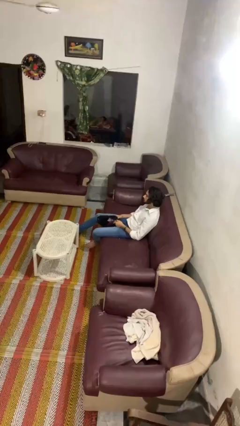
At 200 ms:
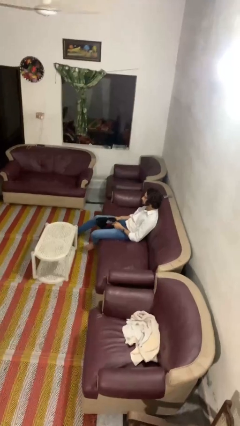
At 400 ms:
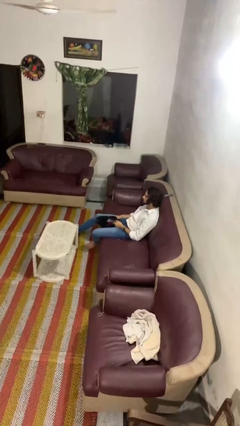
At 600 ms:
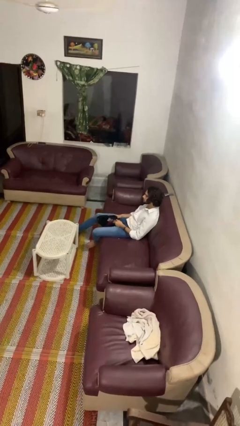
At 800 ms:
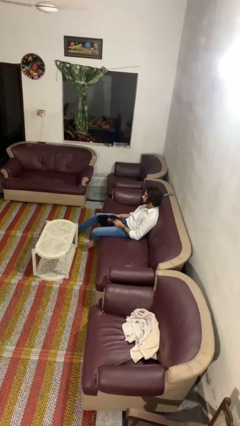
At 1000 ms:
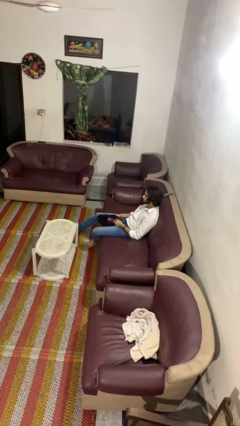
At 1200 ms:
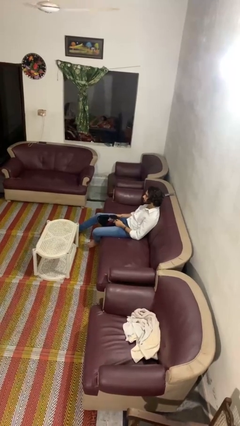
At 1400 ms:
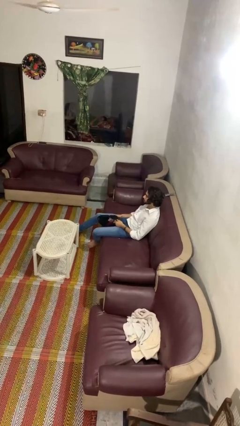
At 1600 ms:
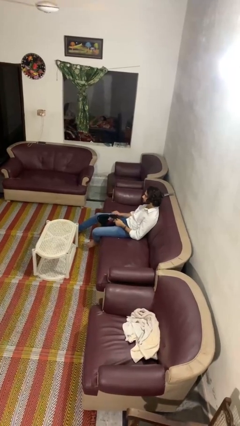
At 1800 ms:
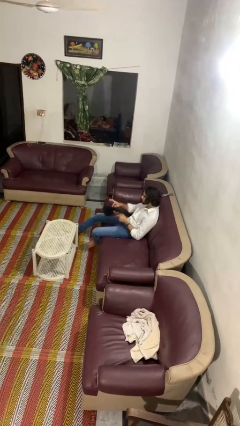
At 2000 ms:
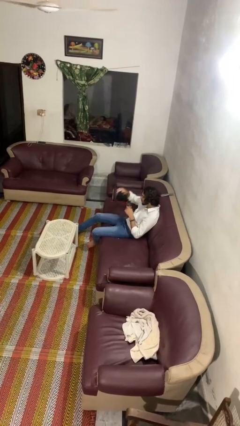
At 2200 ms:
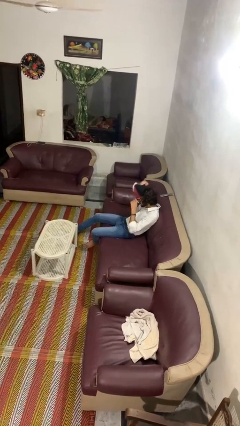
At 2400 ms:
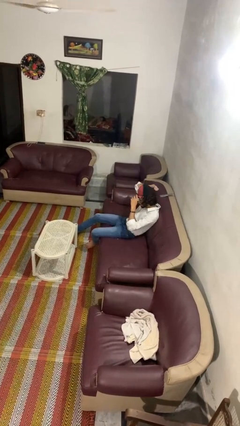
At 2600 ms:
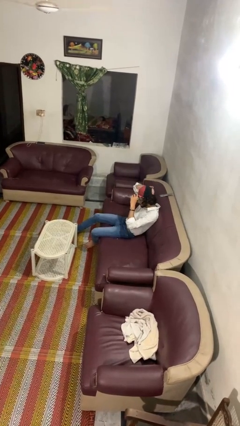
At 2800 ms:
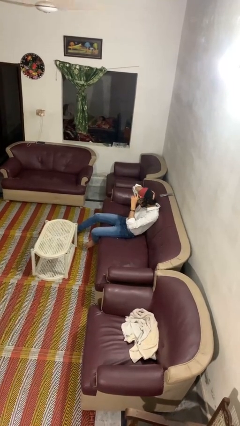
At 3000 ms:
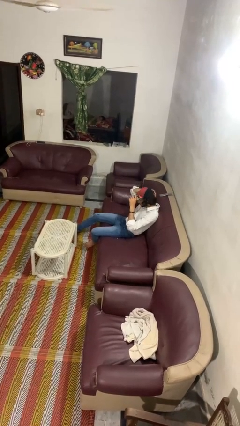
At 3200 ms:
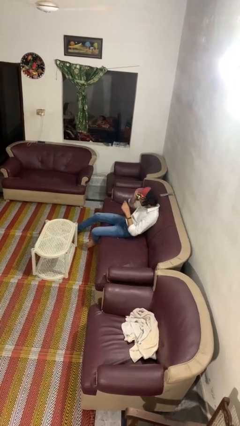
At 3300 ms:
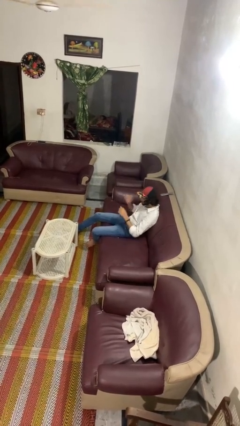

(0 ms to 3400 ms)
person puts on hat

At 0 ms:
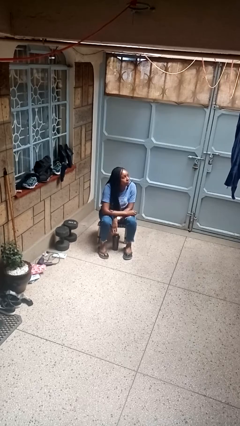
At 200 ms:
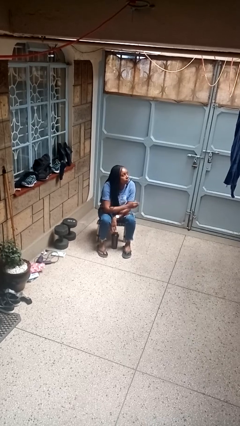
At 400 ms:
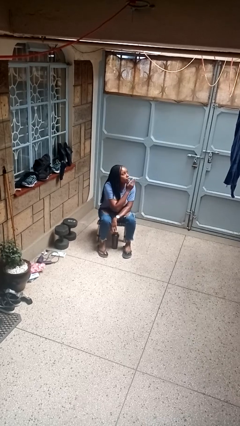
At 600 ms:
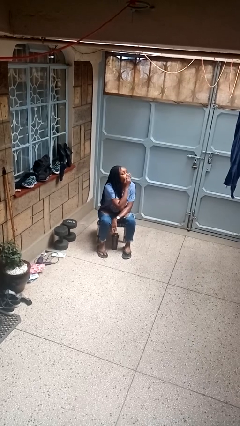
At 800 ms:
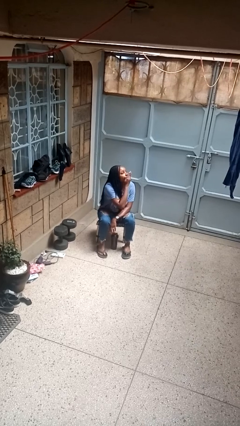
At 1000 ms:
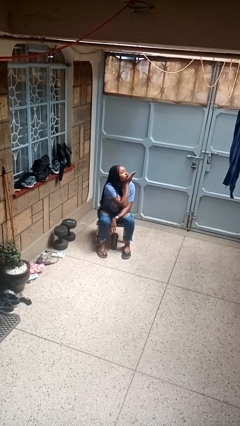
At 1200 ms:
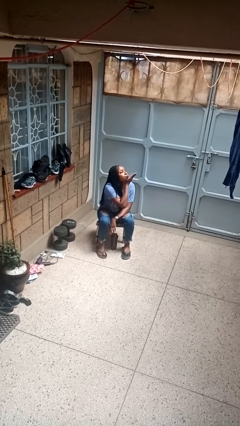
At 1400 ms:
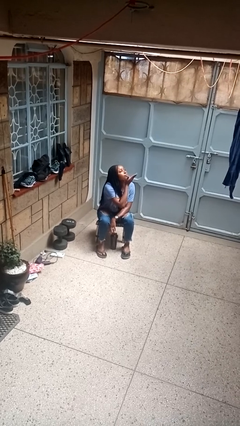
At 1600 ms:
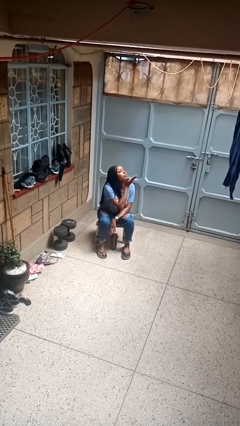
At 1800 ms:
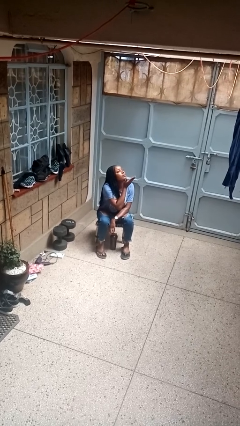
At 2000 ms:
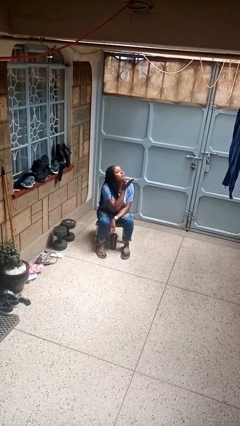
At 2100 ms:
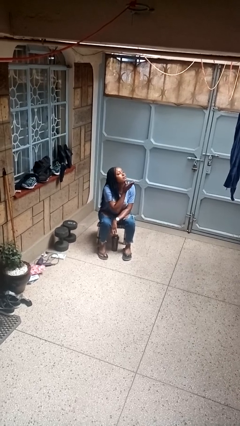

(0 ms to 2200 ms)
person gestures blow kiss

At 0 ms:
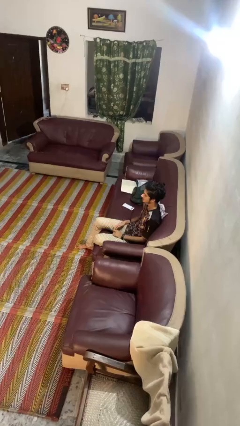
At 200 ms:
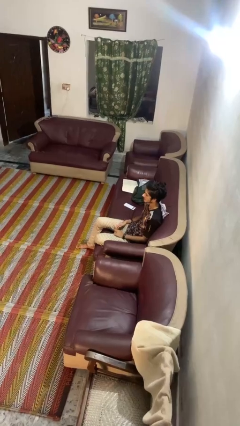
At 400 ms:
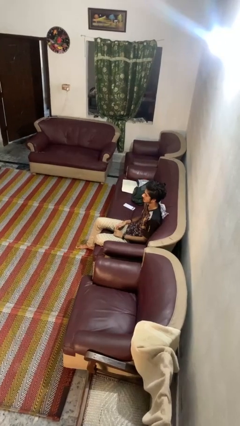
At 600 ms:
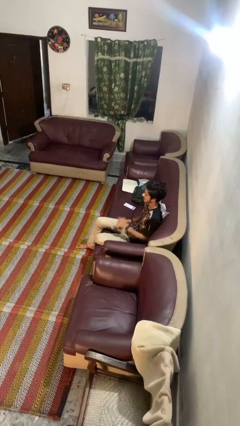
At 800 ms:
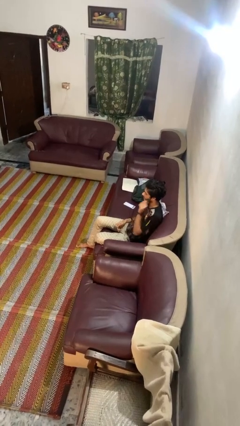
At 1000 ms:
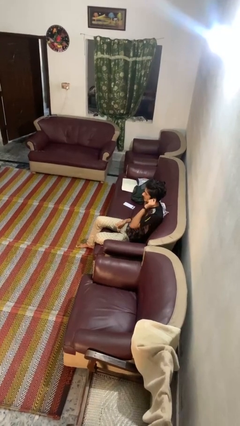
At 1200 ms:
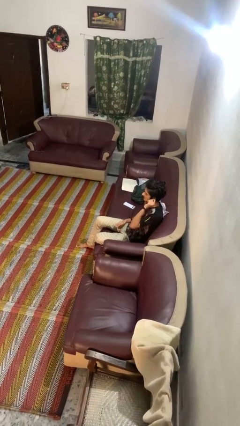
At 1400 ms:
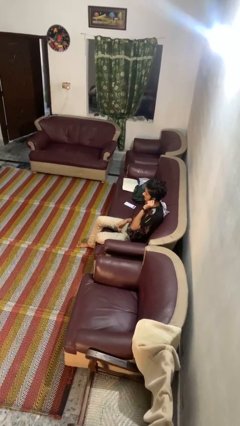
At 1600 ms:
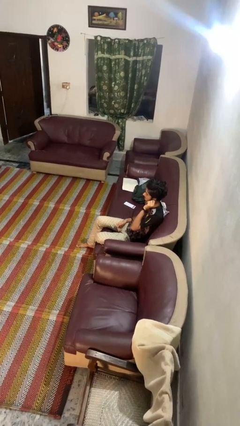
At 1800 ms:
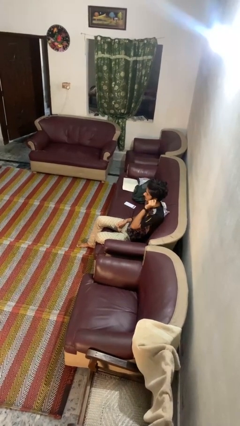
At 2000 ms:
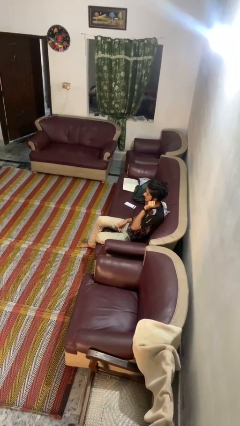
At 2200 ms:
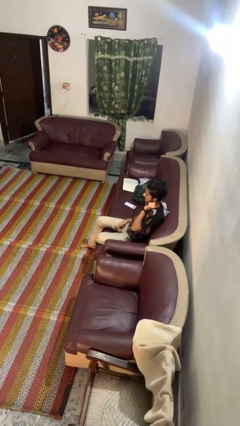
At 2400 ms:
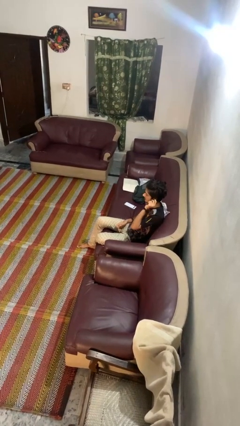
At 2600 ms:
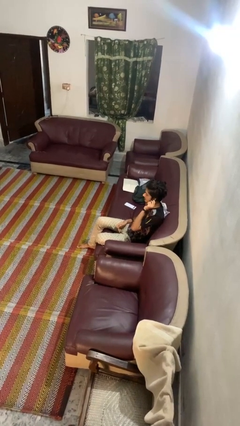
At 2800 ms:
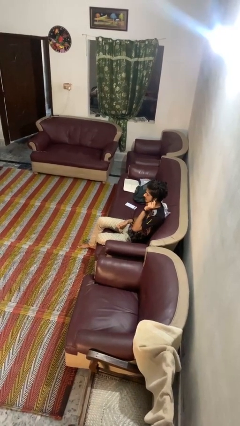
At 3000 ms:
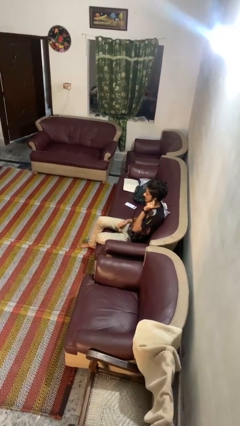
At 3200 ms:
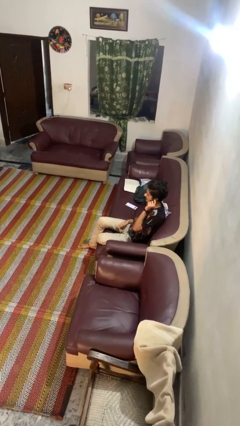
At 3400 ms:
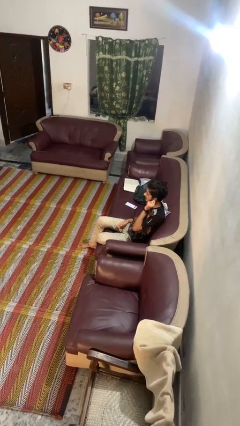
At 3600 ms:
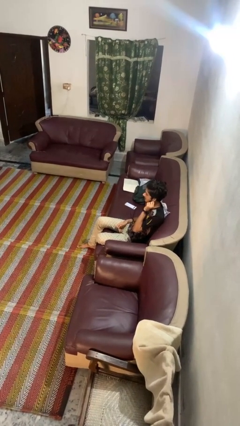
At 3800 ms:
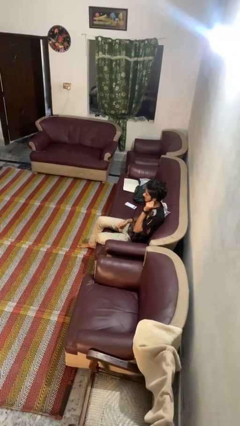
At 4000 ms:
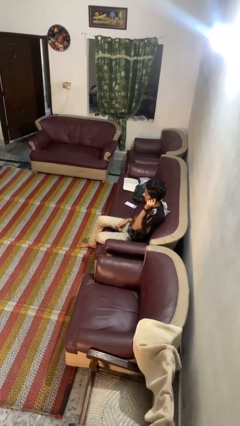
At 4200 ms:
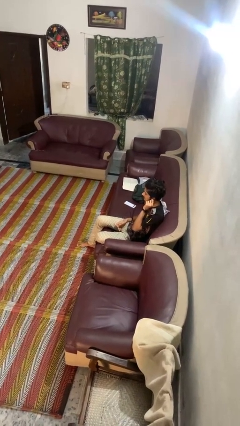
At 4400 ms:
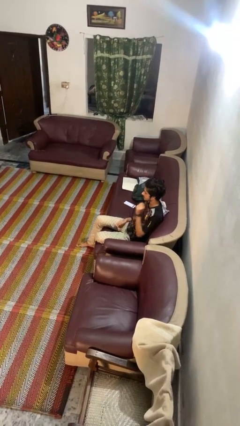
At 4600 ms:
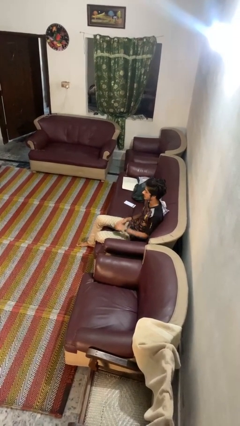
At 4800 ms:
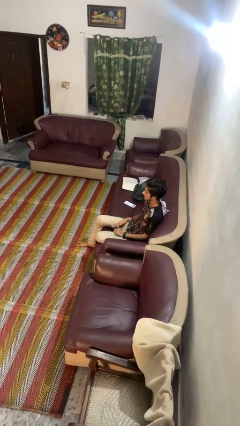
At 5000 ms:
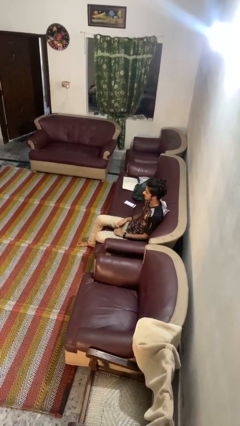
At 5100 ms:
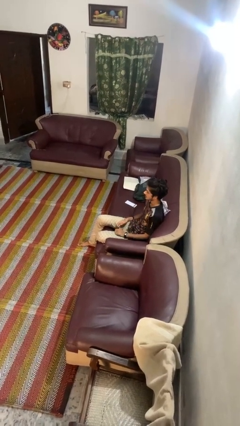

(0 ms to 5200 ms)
person touches earlobe

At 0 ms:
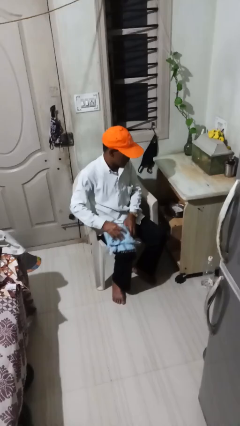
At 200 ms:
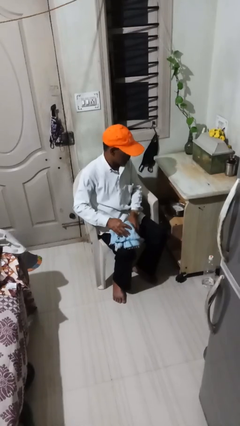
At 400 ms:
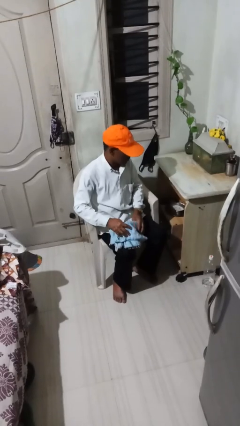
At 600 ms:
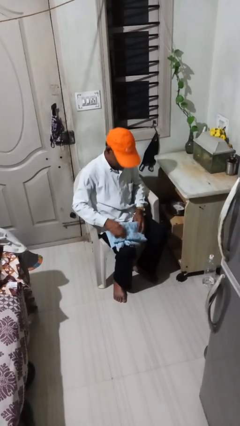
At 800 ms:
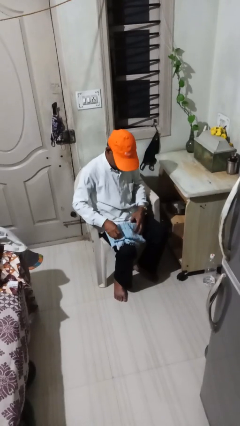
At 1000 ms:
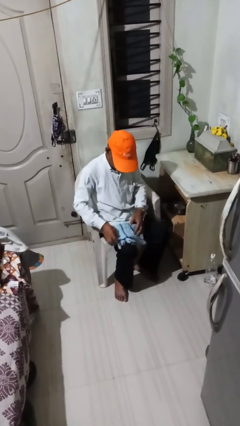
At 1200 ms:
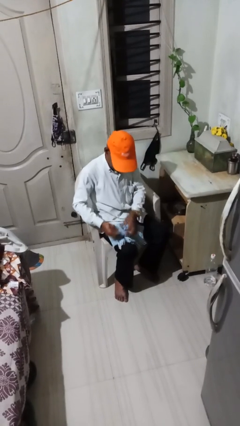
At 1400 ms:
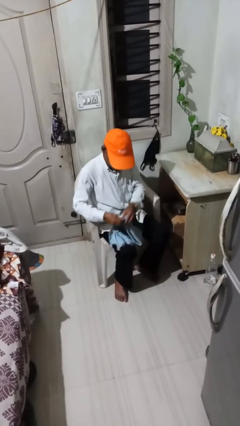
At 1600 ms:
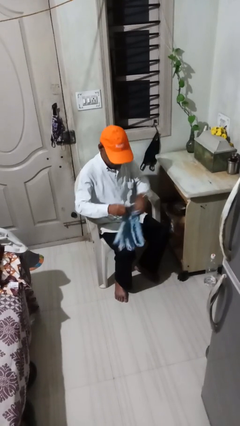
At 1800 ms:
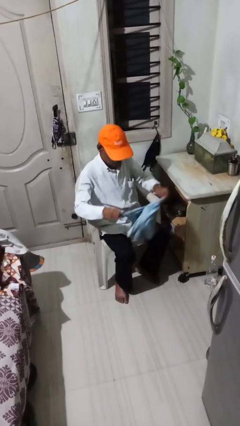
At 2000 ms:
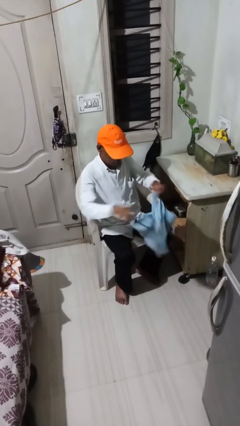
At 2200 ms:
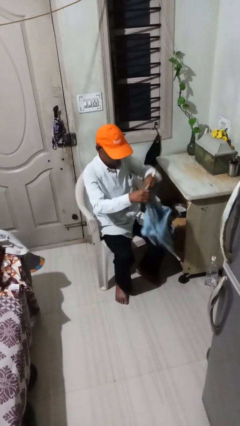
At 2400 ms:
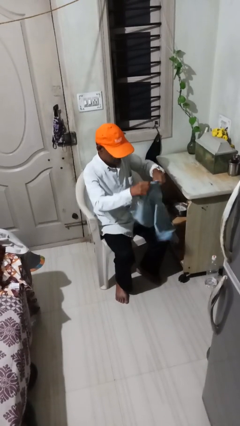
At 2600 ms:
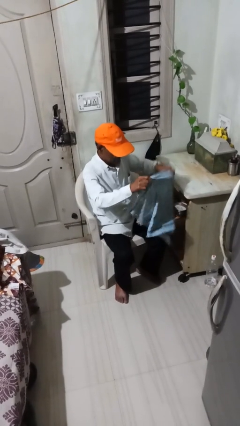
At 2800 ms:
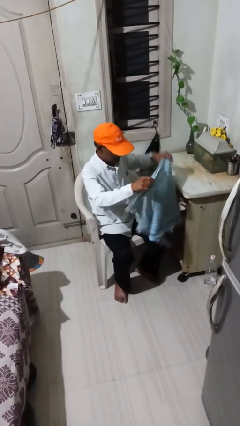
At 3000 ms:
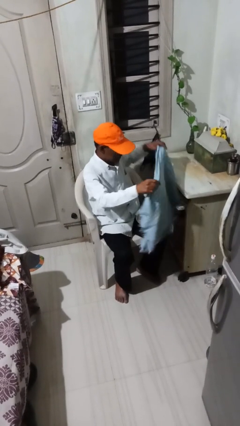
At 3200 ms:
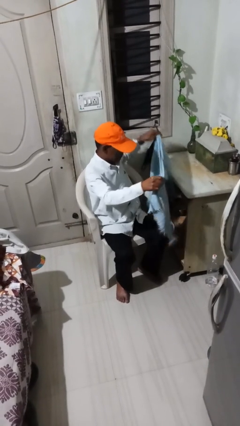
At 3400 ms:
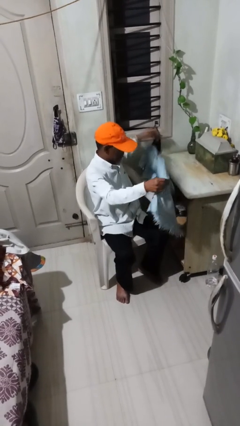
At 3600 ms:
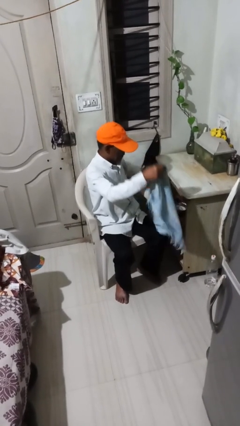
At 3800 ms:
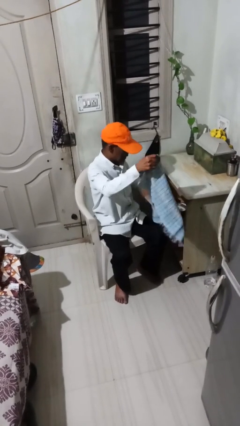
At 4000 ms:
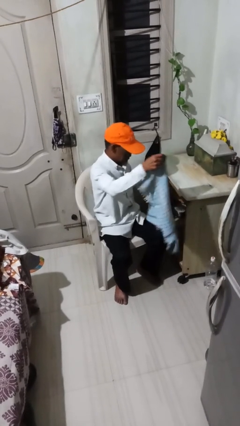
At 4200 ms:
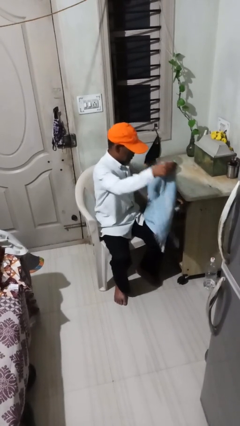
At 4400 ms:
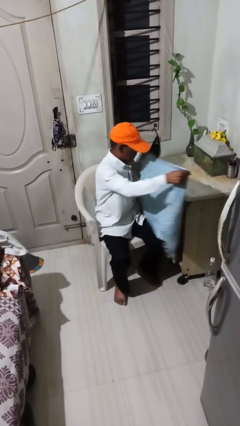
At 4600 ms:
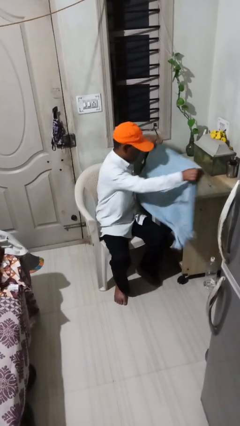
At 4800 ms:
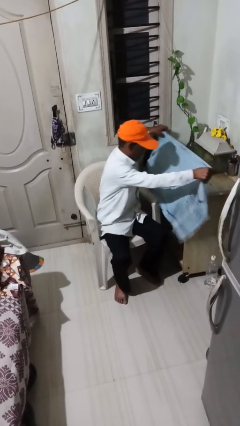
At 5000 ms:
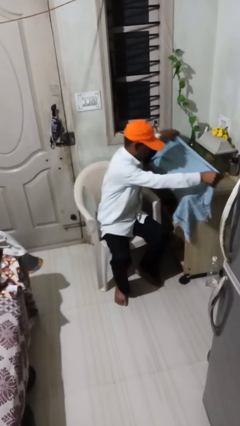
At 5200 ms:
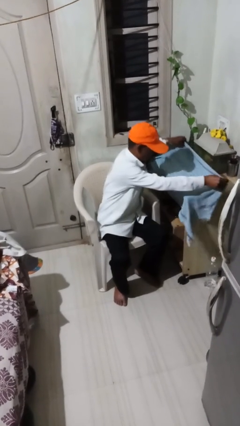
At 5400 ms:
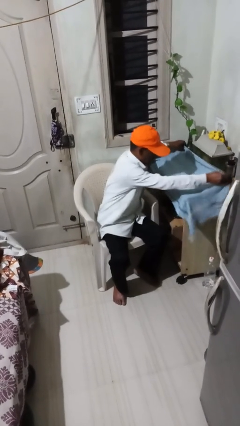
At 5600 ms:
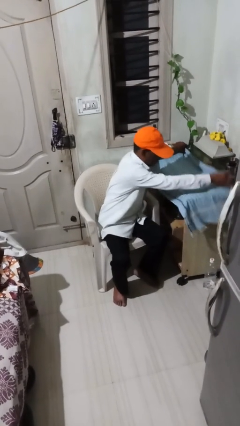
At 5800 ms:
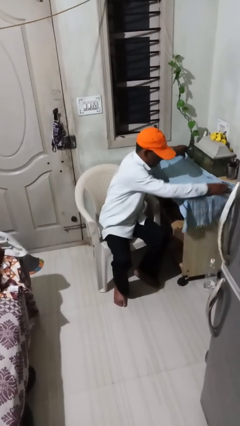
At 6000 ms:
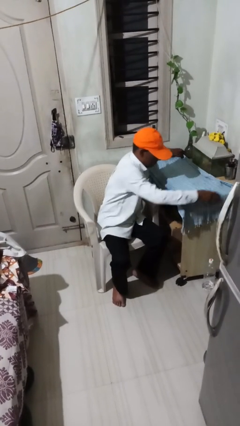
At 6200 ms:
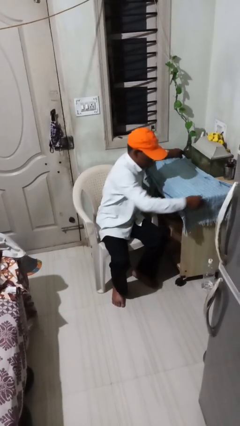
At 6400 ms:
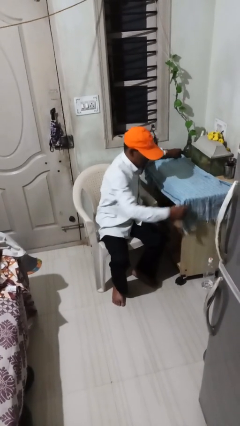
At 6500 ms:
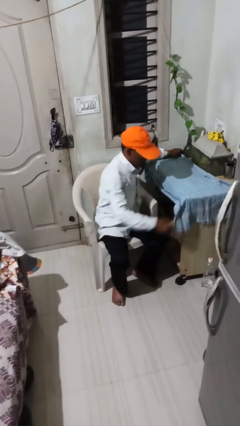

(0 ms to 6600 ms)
person spreads tablecloth
